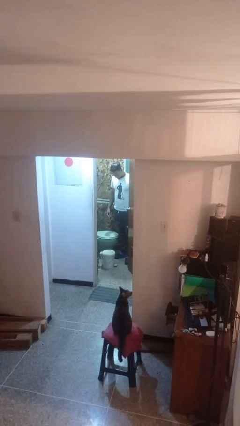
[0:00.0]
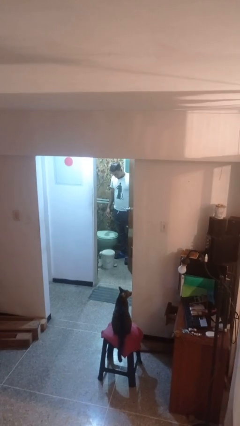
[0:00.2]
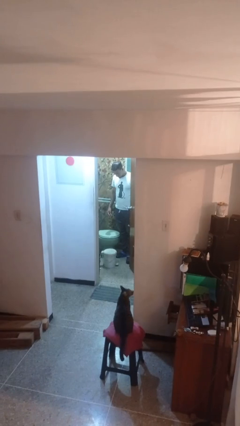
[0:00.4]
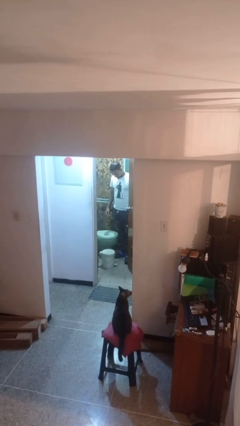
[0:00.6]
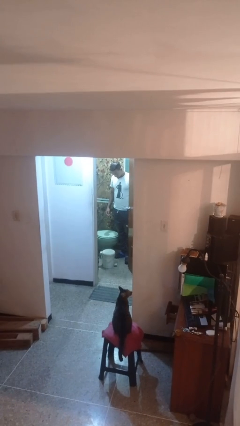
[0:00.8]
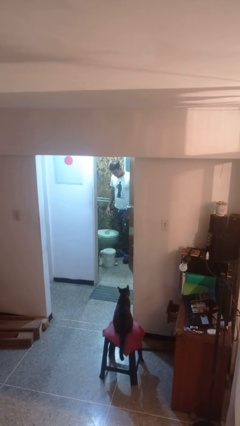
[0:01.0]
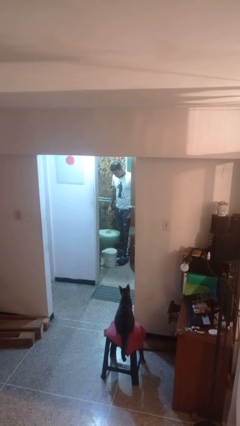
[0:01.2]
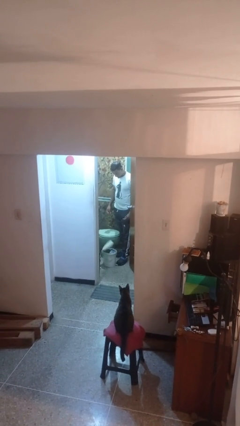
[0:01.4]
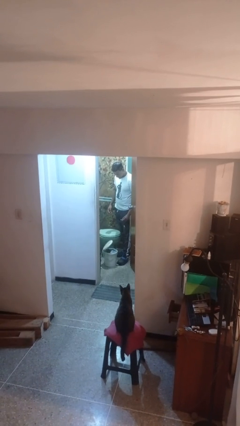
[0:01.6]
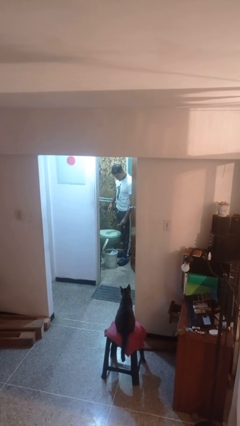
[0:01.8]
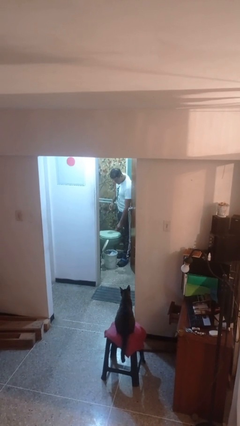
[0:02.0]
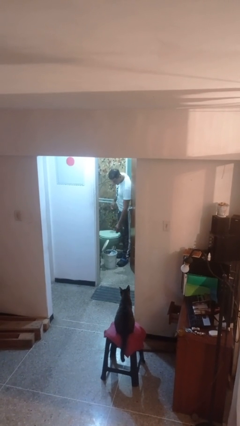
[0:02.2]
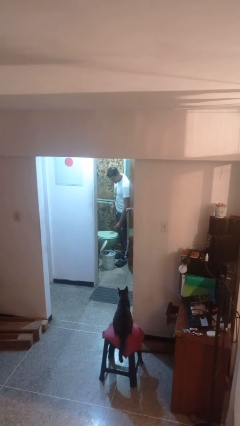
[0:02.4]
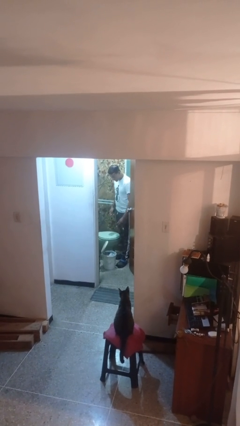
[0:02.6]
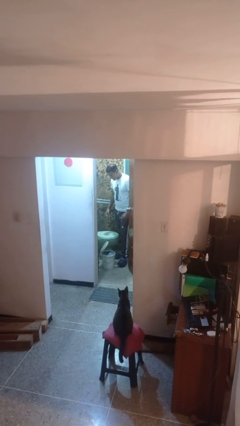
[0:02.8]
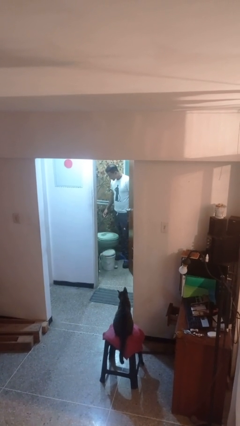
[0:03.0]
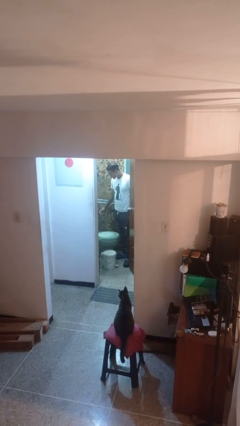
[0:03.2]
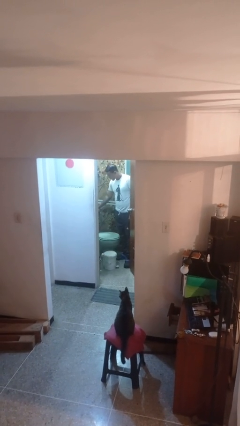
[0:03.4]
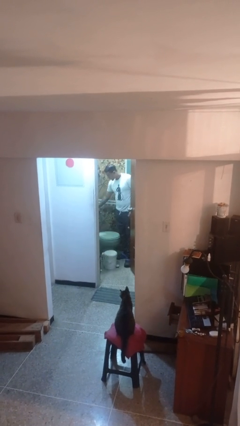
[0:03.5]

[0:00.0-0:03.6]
person discards trash

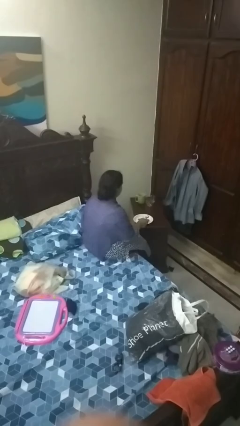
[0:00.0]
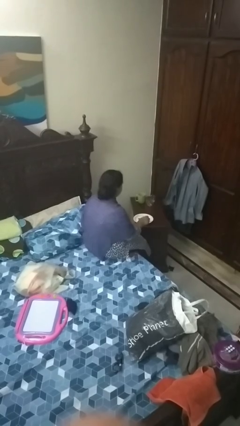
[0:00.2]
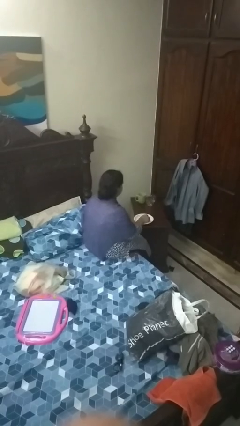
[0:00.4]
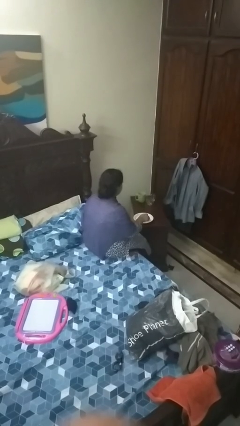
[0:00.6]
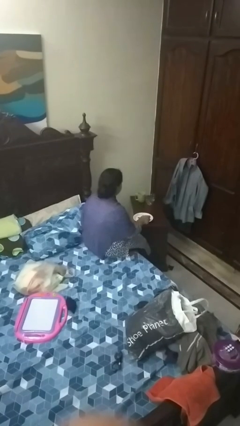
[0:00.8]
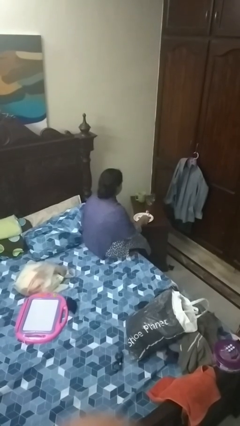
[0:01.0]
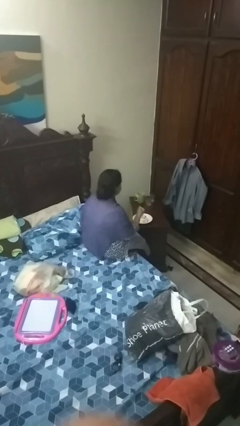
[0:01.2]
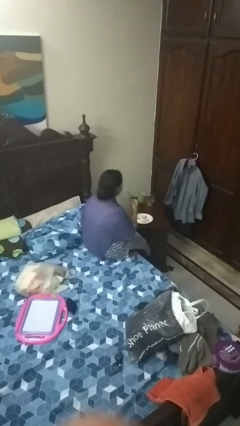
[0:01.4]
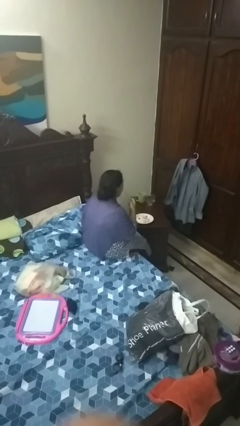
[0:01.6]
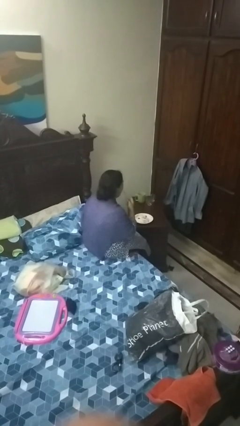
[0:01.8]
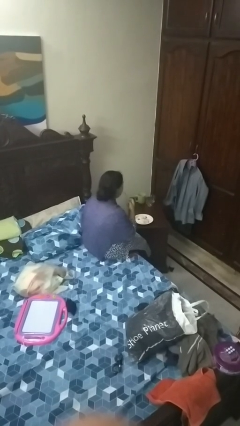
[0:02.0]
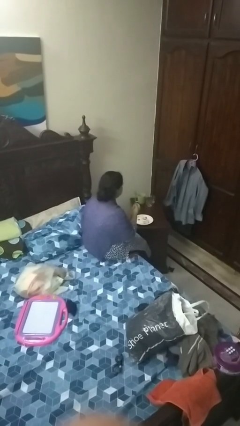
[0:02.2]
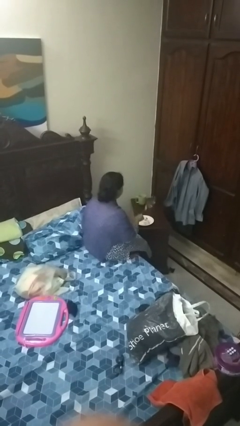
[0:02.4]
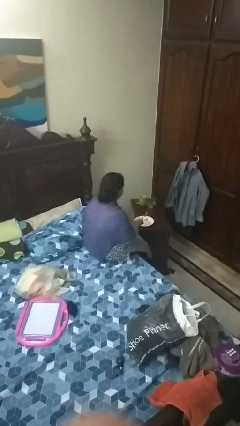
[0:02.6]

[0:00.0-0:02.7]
person eats with utensil

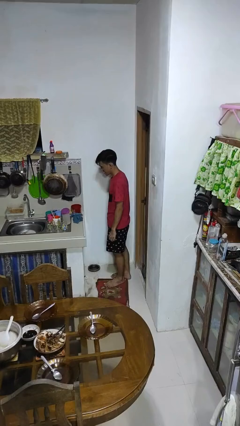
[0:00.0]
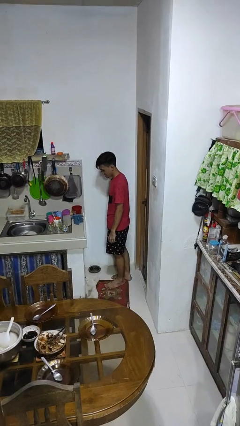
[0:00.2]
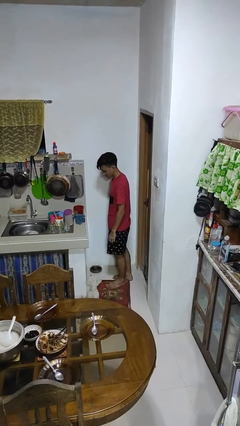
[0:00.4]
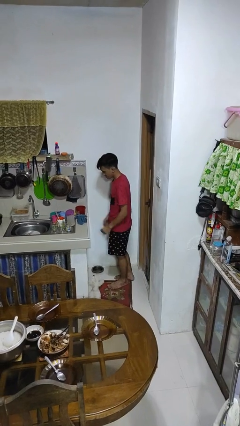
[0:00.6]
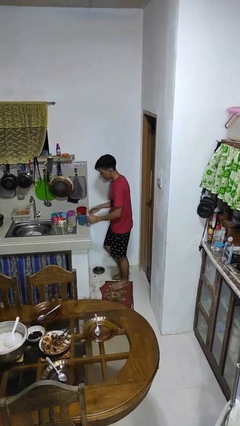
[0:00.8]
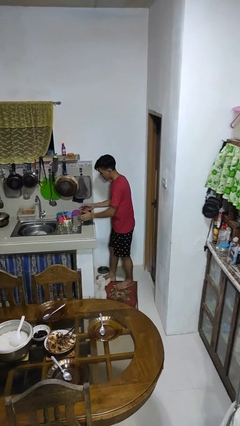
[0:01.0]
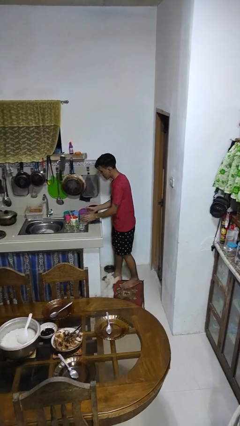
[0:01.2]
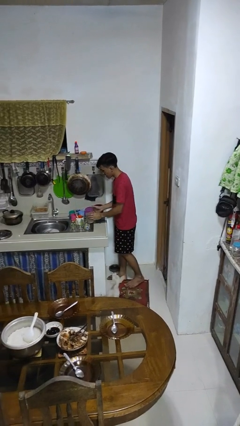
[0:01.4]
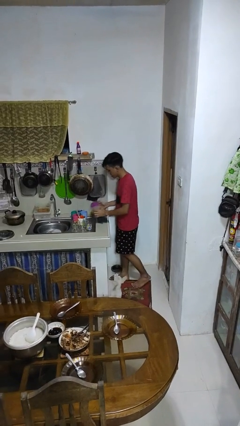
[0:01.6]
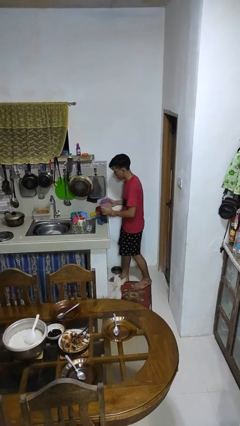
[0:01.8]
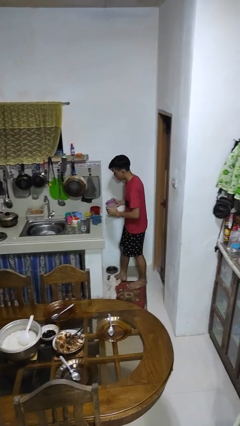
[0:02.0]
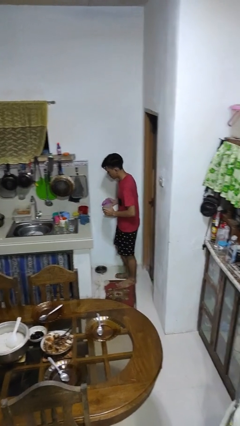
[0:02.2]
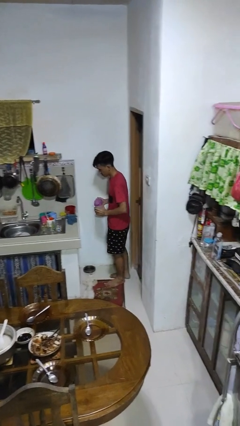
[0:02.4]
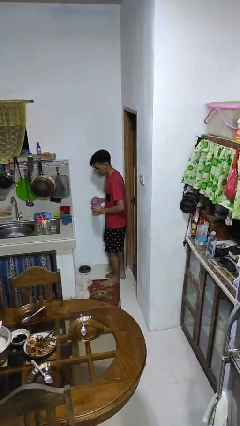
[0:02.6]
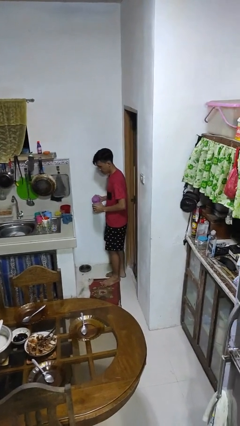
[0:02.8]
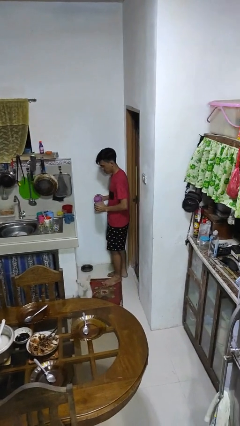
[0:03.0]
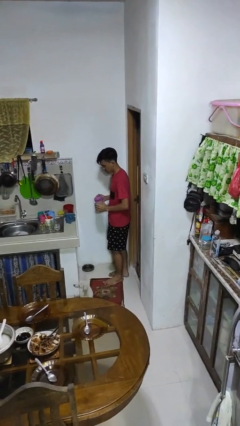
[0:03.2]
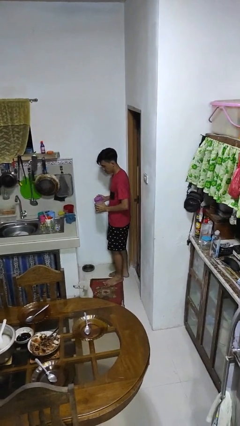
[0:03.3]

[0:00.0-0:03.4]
person picks up object from countertop

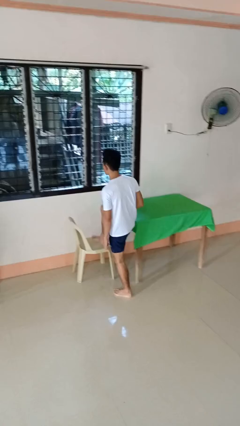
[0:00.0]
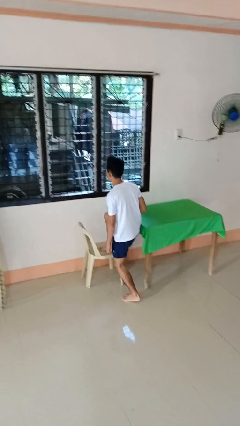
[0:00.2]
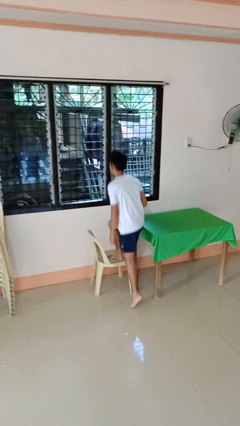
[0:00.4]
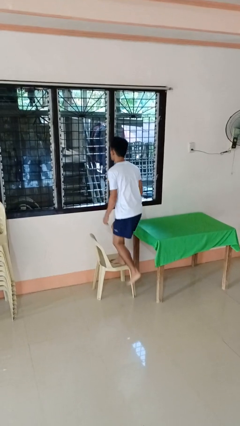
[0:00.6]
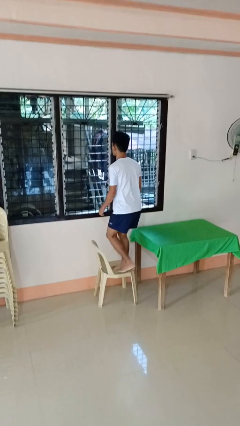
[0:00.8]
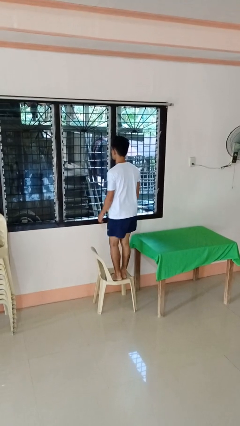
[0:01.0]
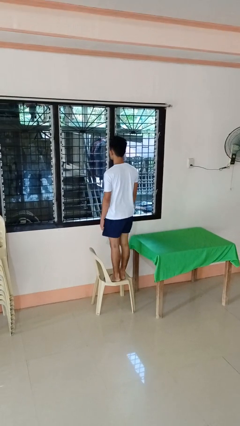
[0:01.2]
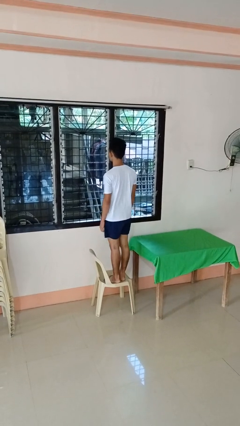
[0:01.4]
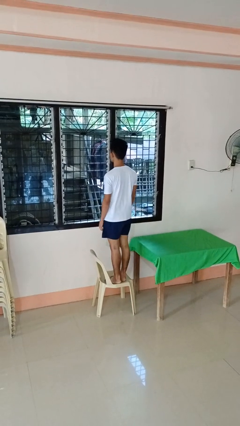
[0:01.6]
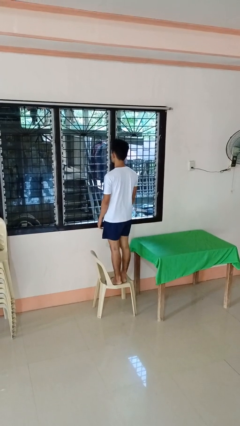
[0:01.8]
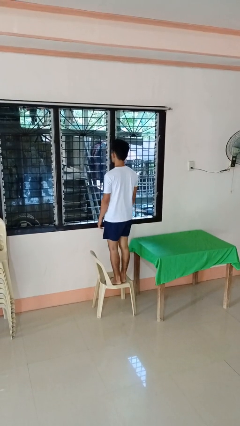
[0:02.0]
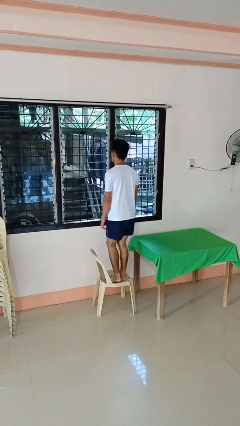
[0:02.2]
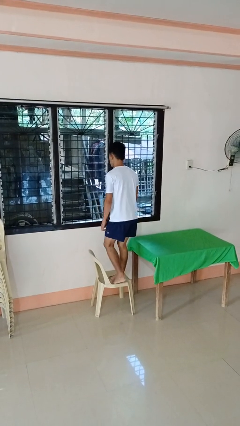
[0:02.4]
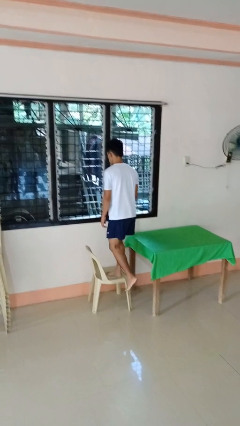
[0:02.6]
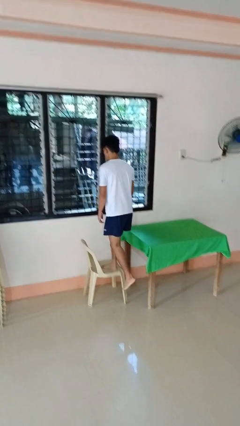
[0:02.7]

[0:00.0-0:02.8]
person climbs on chair

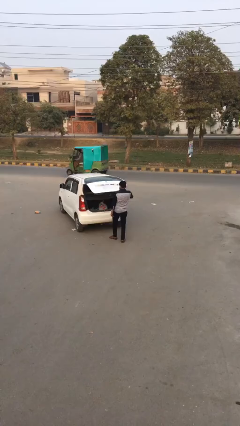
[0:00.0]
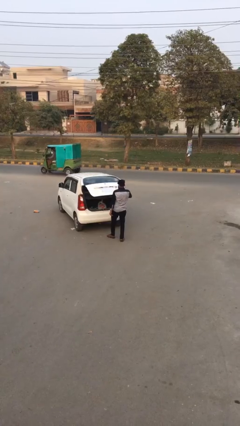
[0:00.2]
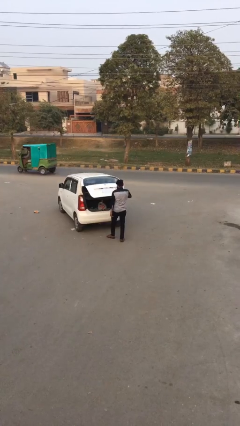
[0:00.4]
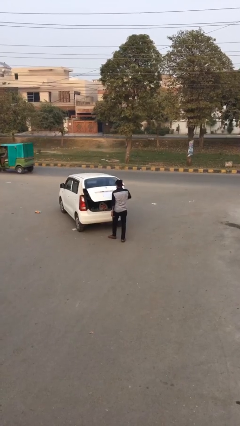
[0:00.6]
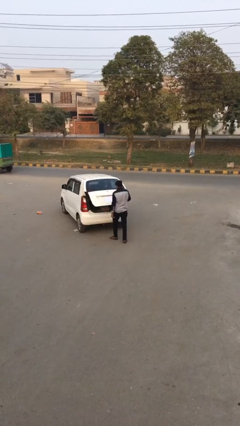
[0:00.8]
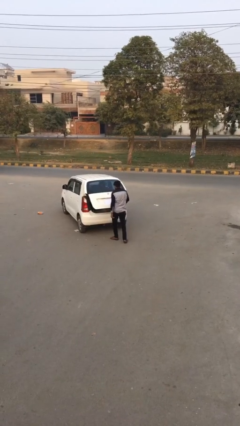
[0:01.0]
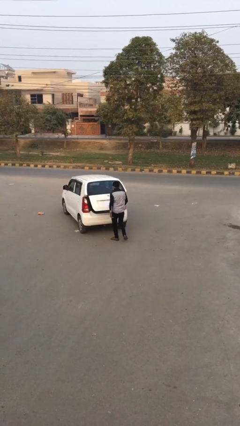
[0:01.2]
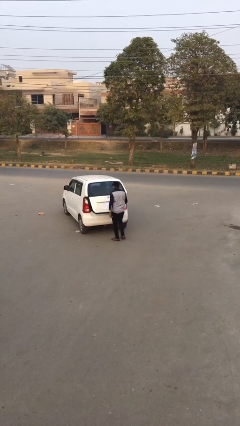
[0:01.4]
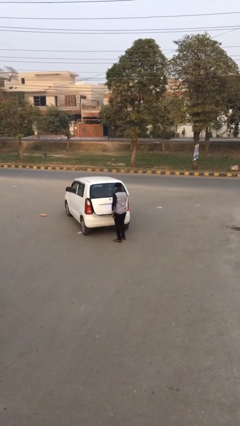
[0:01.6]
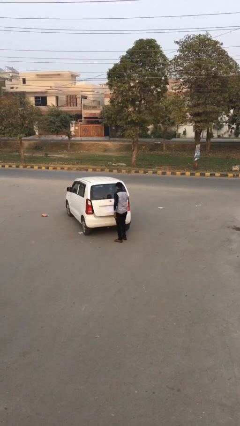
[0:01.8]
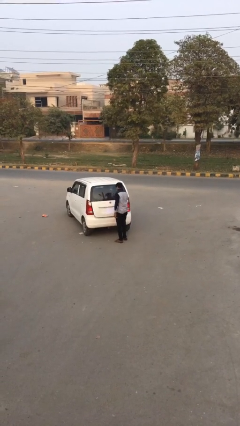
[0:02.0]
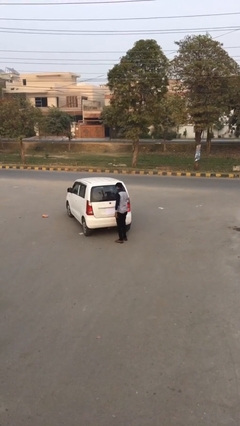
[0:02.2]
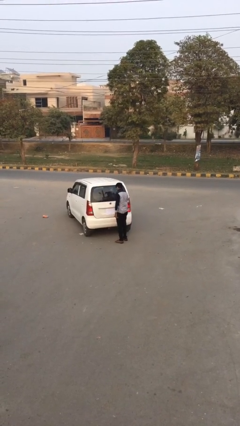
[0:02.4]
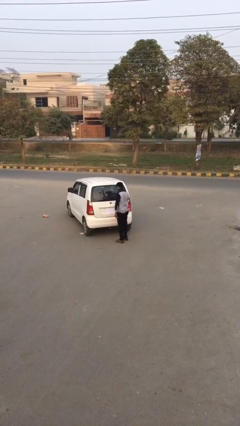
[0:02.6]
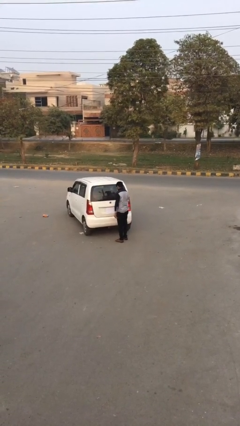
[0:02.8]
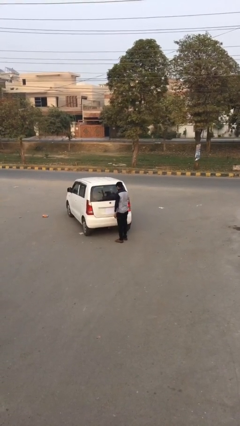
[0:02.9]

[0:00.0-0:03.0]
person closes car trunk

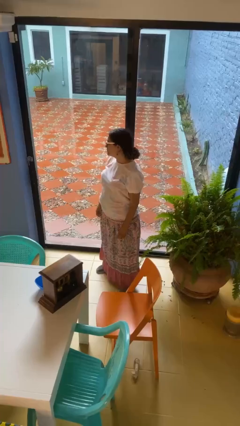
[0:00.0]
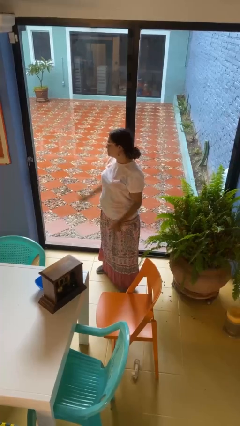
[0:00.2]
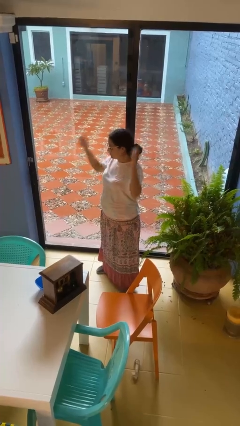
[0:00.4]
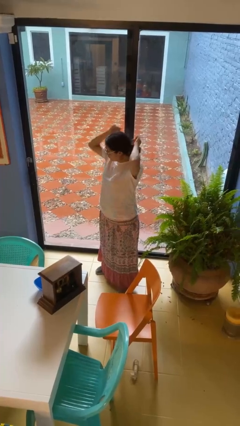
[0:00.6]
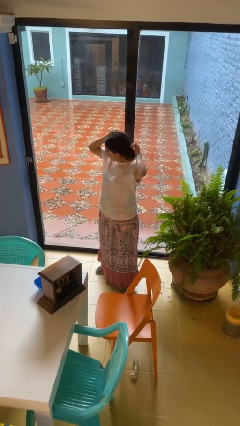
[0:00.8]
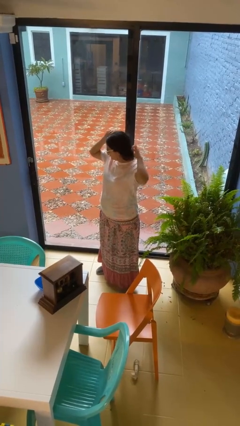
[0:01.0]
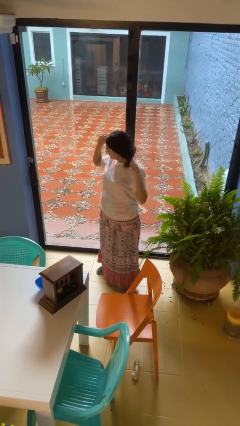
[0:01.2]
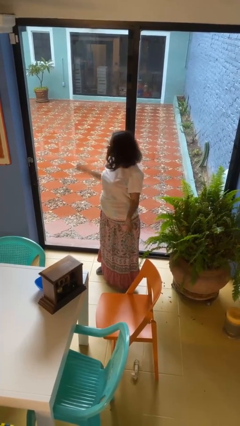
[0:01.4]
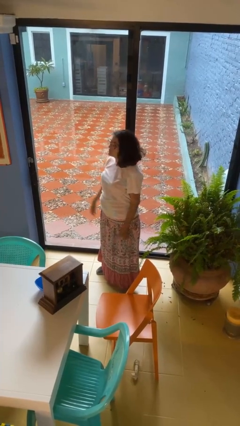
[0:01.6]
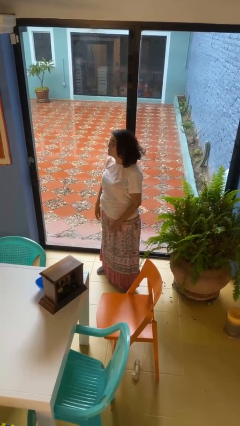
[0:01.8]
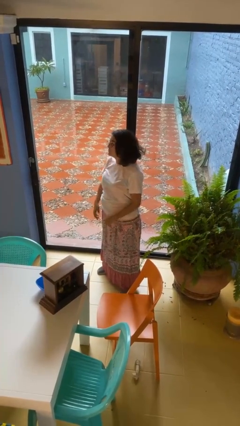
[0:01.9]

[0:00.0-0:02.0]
person takes off hairtie

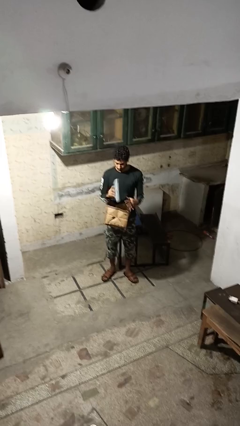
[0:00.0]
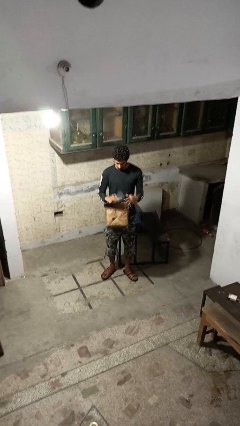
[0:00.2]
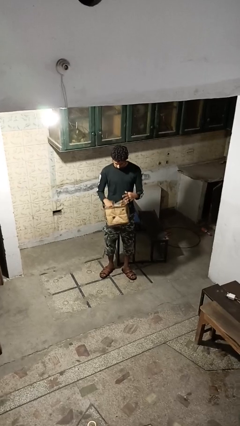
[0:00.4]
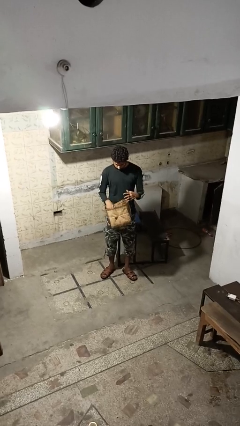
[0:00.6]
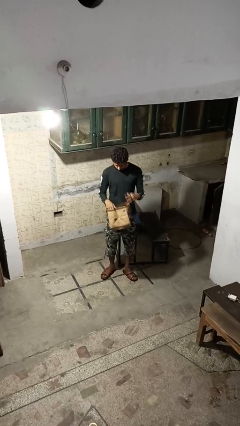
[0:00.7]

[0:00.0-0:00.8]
person puts object into purse
